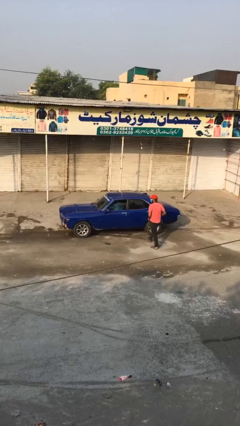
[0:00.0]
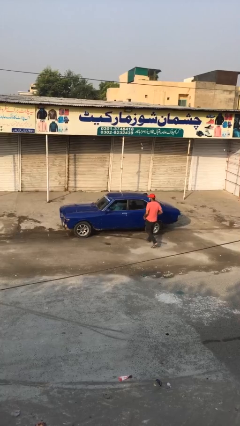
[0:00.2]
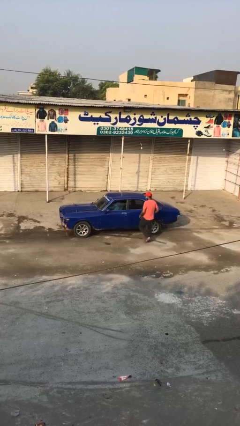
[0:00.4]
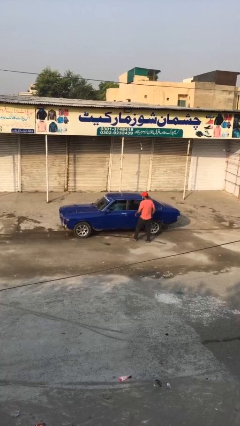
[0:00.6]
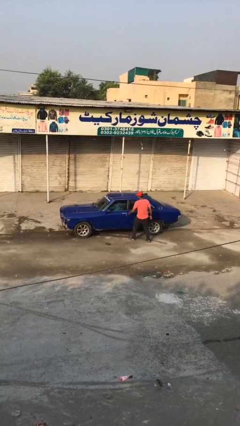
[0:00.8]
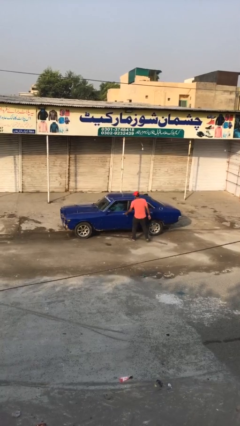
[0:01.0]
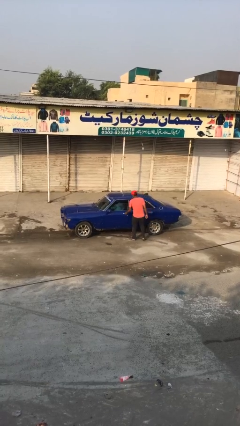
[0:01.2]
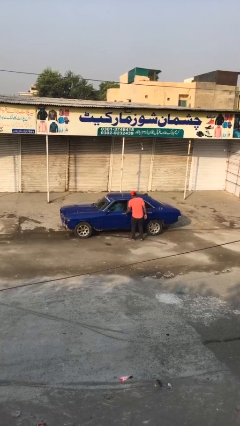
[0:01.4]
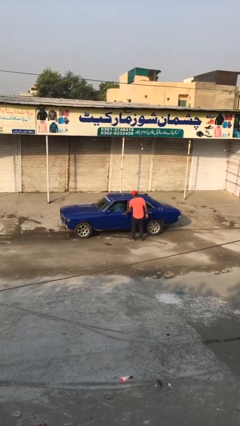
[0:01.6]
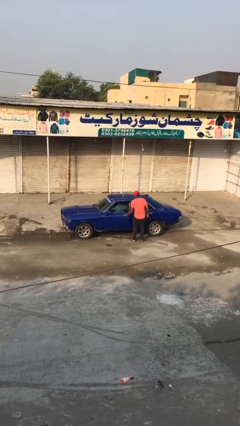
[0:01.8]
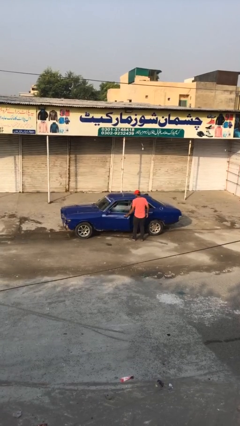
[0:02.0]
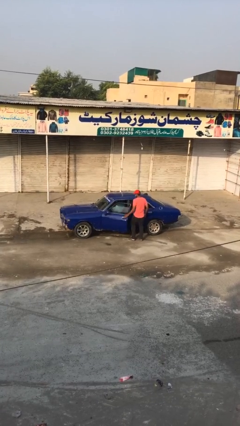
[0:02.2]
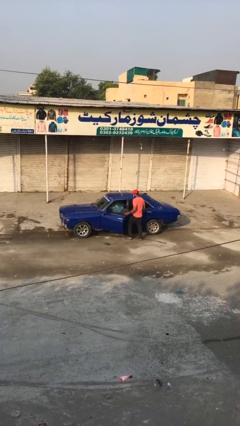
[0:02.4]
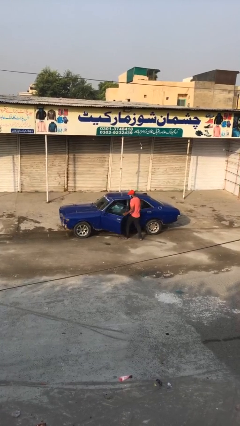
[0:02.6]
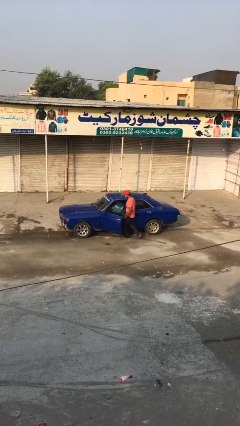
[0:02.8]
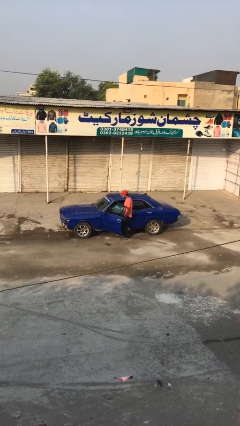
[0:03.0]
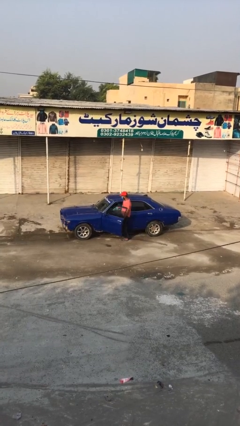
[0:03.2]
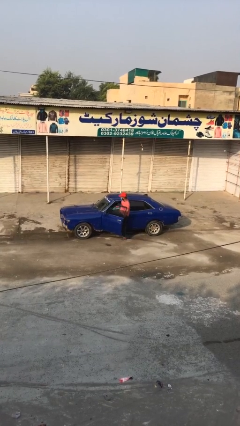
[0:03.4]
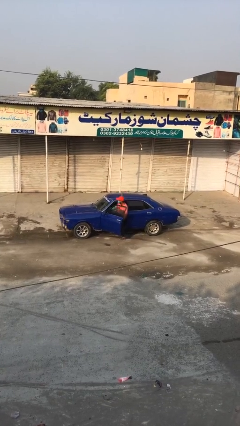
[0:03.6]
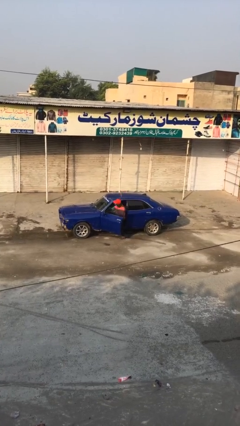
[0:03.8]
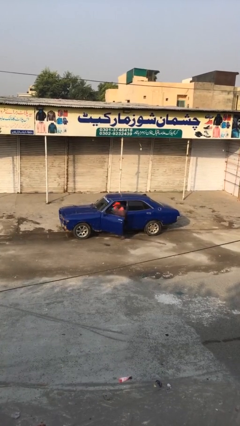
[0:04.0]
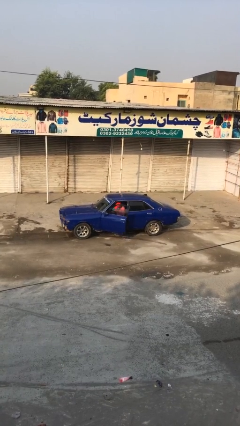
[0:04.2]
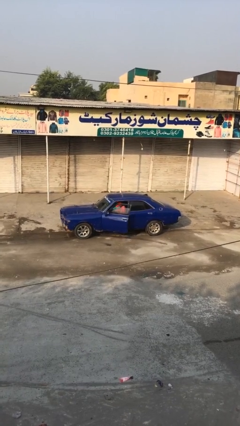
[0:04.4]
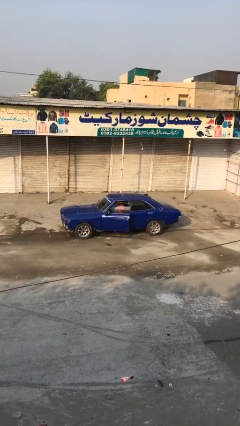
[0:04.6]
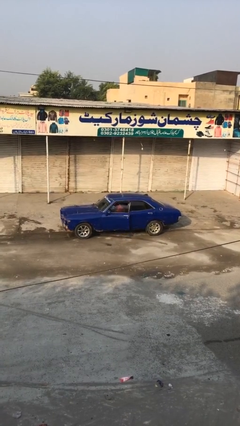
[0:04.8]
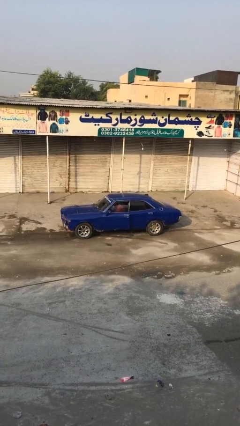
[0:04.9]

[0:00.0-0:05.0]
car picks up person

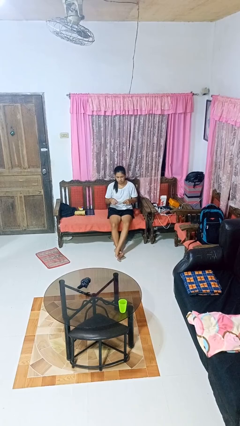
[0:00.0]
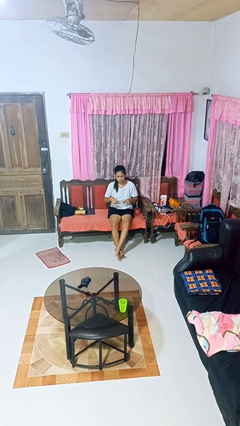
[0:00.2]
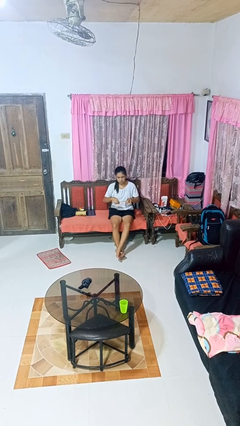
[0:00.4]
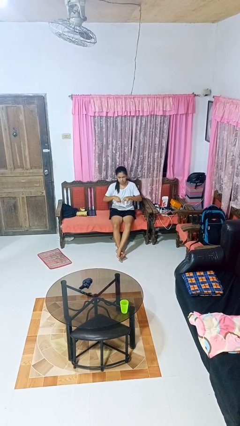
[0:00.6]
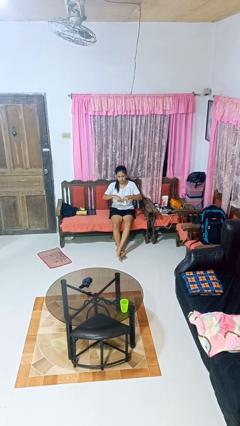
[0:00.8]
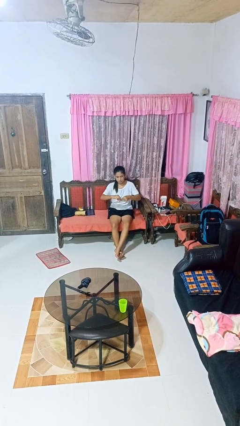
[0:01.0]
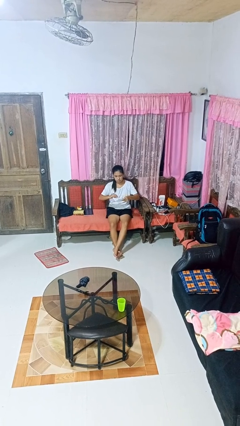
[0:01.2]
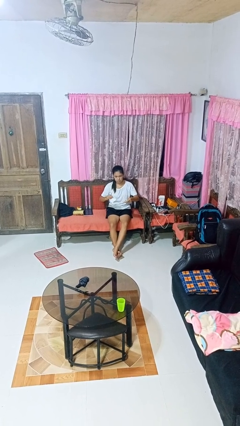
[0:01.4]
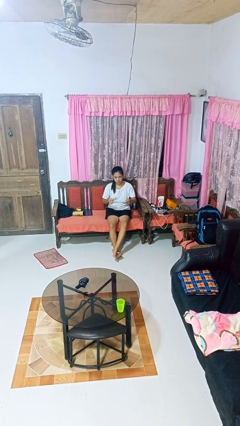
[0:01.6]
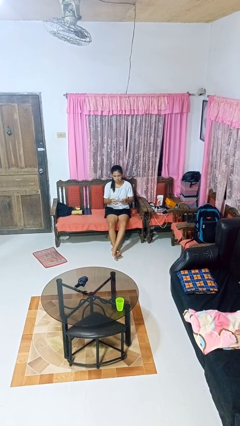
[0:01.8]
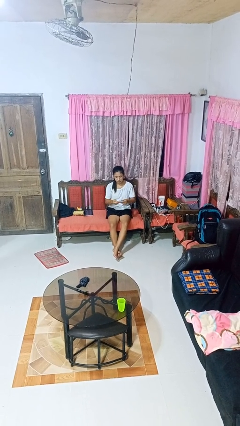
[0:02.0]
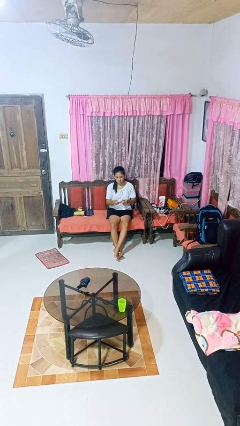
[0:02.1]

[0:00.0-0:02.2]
person tears paper

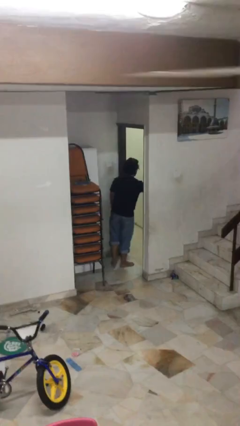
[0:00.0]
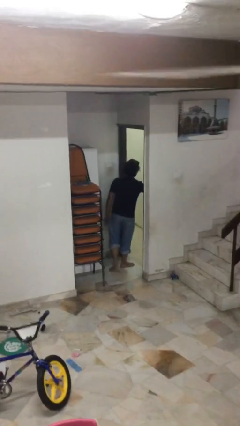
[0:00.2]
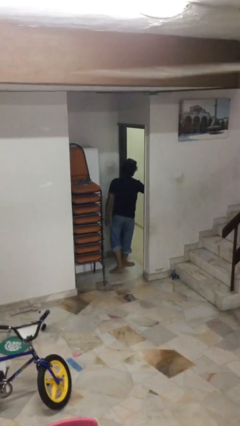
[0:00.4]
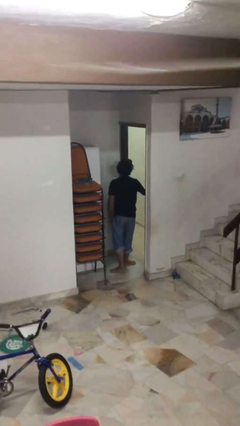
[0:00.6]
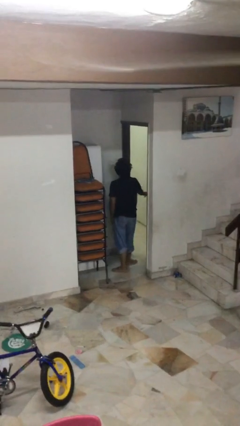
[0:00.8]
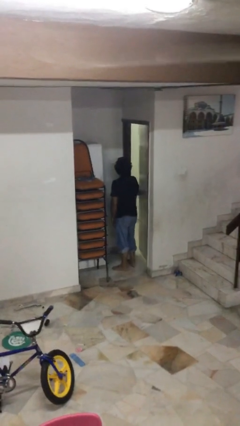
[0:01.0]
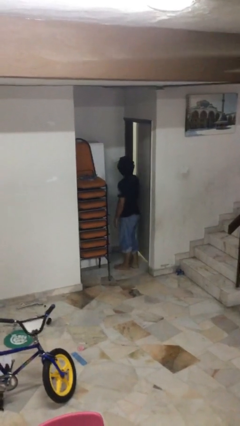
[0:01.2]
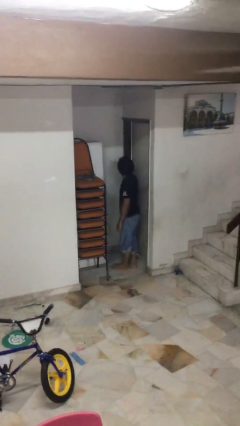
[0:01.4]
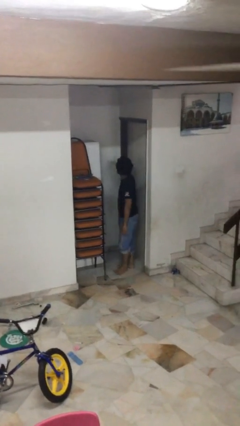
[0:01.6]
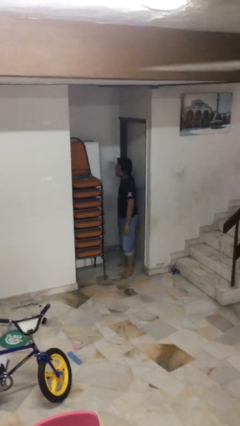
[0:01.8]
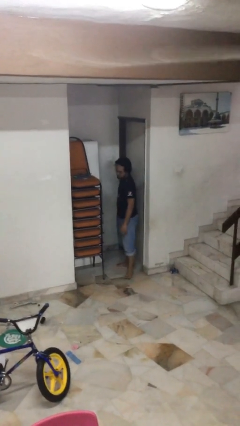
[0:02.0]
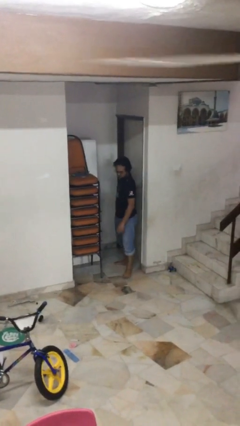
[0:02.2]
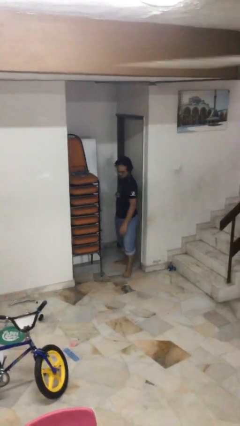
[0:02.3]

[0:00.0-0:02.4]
person closes facility door

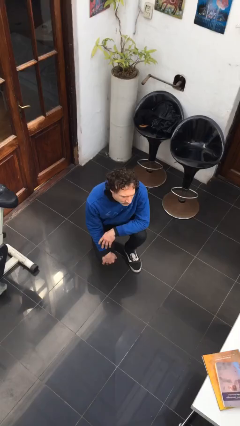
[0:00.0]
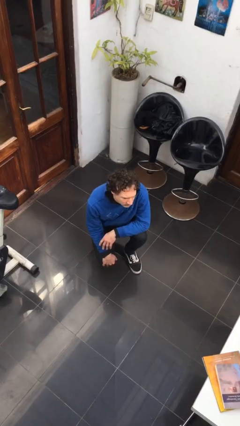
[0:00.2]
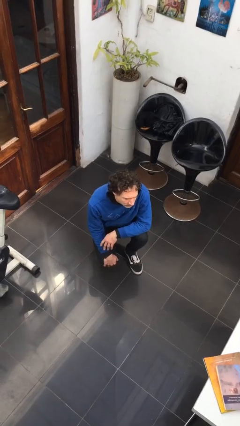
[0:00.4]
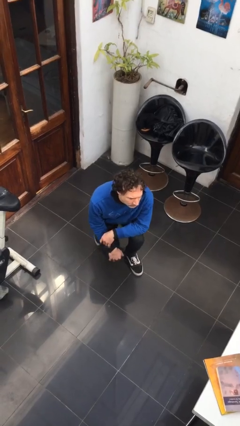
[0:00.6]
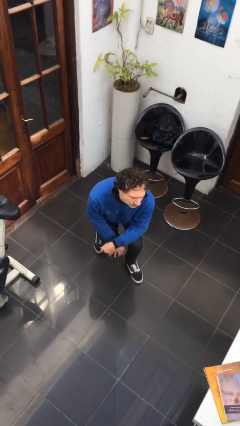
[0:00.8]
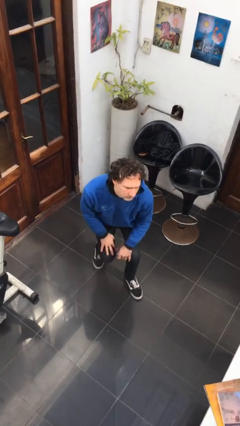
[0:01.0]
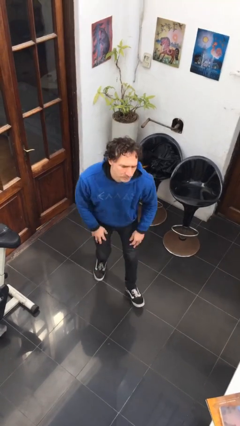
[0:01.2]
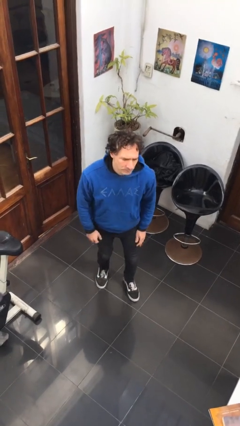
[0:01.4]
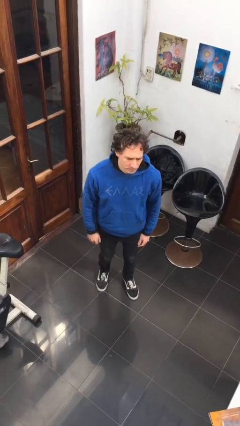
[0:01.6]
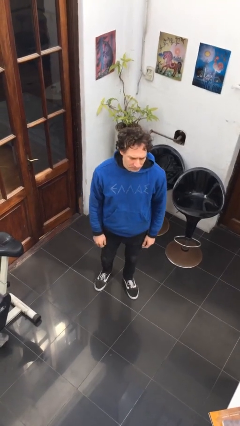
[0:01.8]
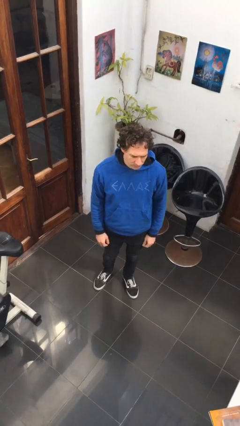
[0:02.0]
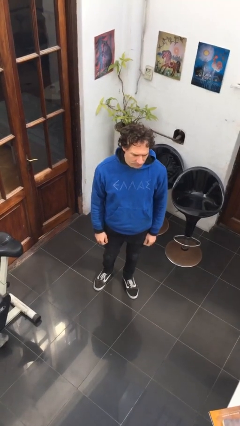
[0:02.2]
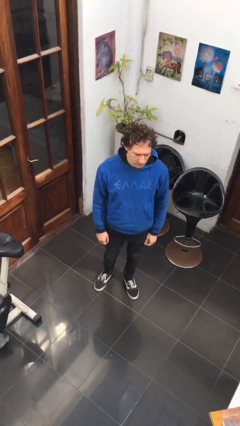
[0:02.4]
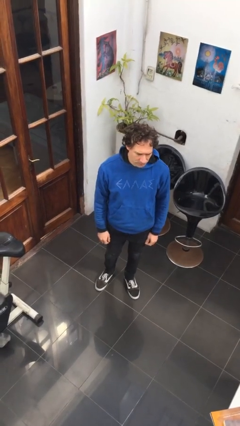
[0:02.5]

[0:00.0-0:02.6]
person stands up

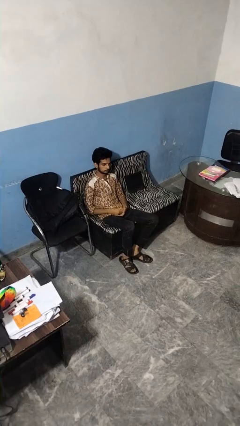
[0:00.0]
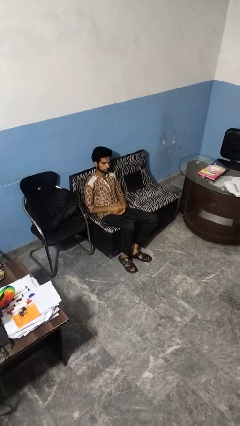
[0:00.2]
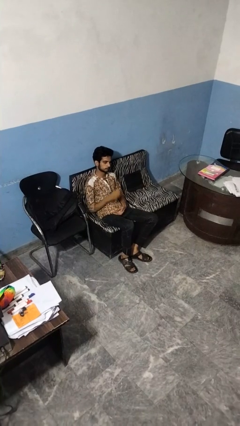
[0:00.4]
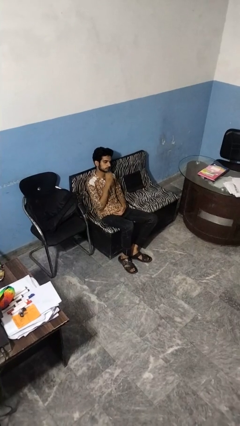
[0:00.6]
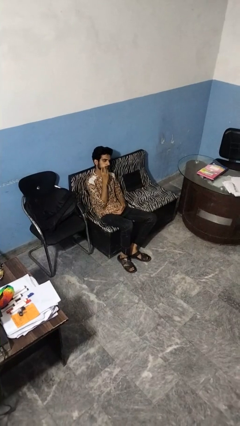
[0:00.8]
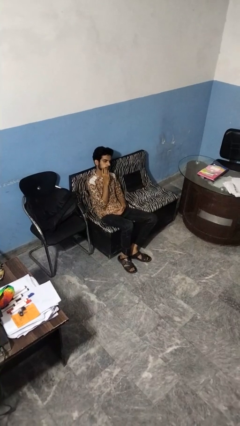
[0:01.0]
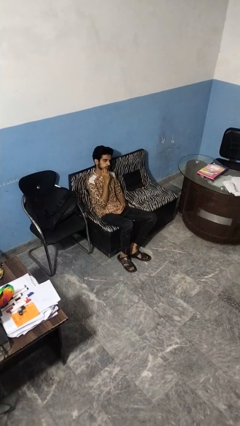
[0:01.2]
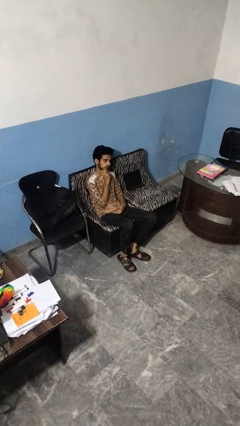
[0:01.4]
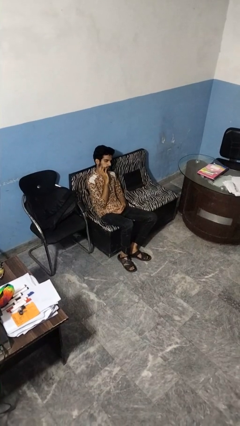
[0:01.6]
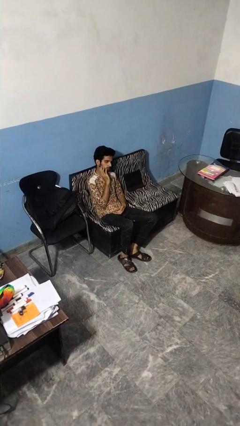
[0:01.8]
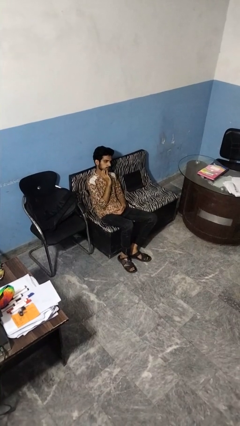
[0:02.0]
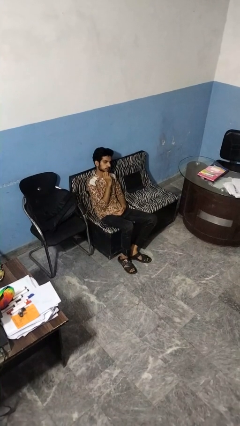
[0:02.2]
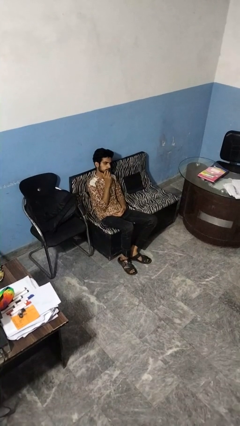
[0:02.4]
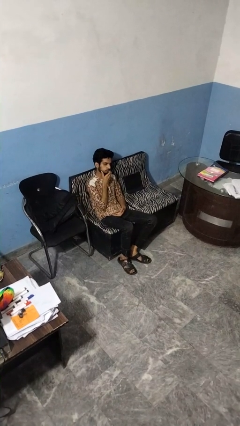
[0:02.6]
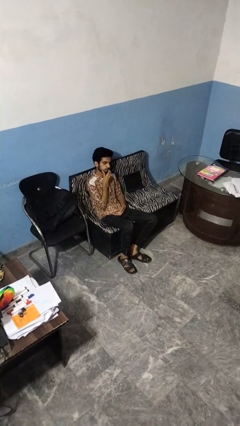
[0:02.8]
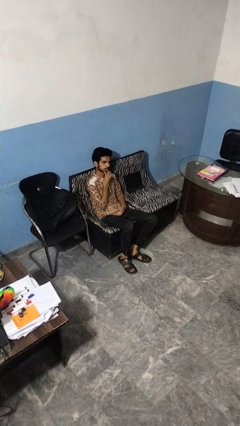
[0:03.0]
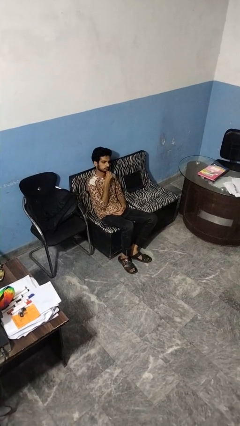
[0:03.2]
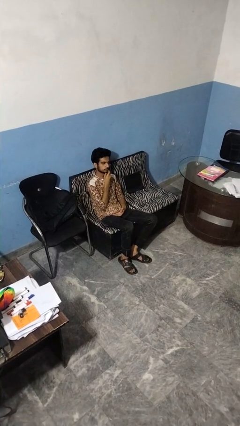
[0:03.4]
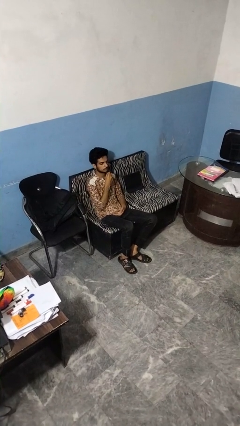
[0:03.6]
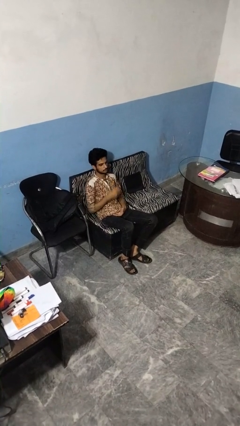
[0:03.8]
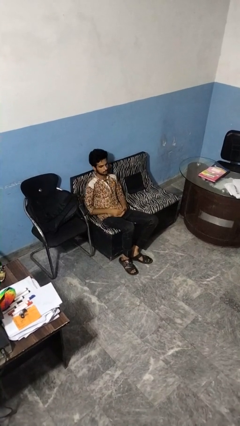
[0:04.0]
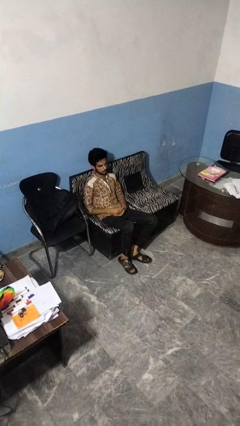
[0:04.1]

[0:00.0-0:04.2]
person strokes chin

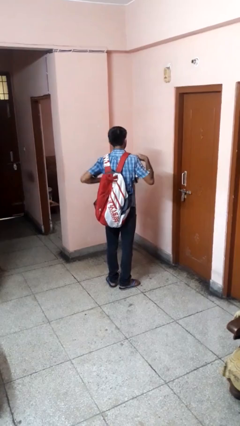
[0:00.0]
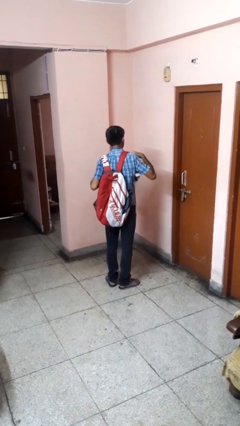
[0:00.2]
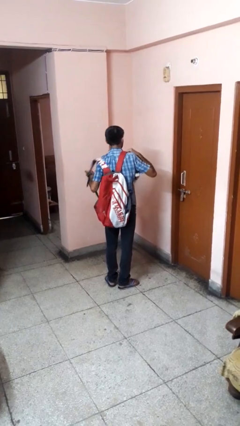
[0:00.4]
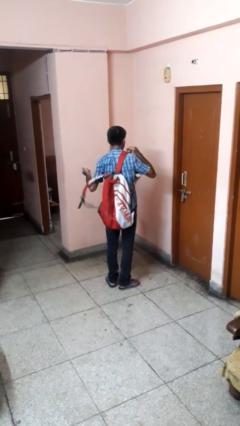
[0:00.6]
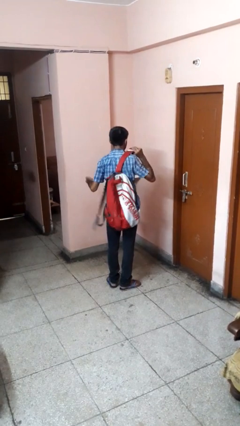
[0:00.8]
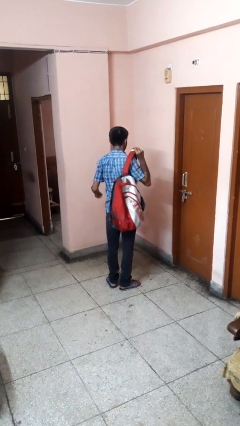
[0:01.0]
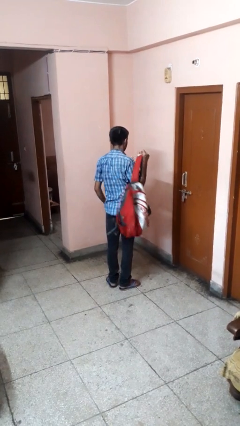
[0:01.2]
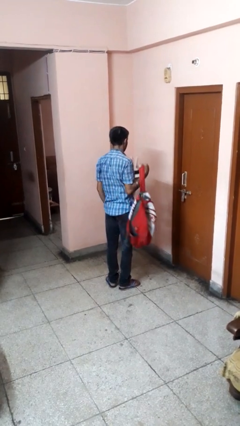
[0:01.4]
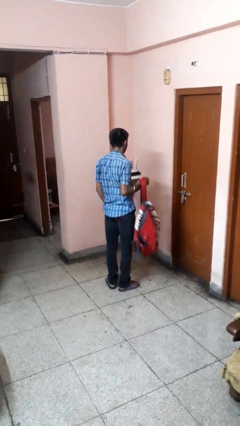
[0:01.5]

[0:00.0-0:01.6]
person takes off backpack
